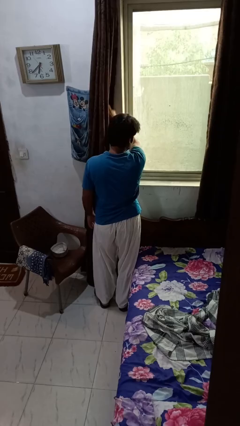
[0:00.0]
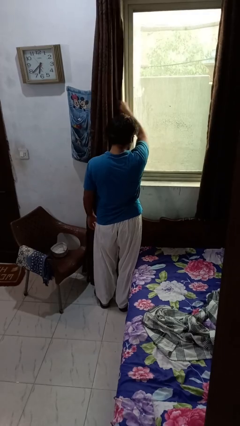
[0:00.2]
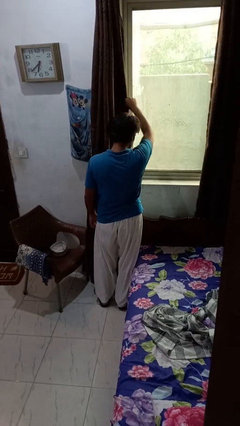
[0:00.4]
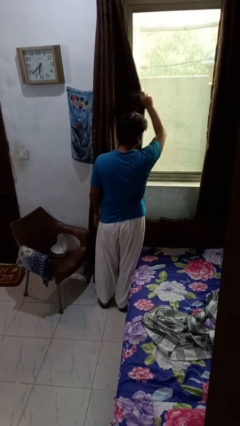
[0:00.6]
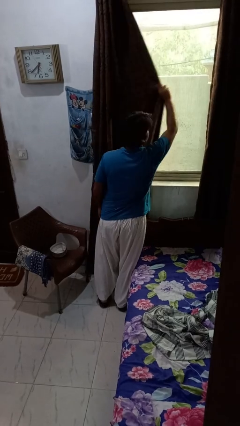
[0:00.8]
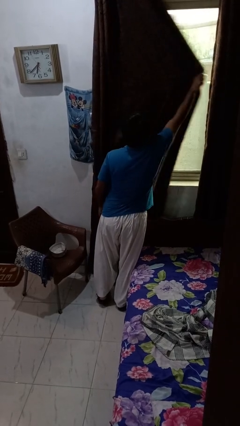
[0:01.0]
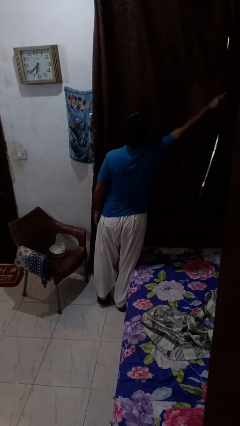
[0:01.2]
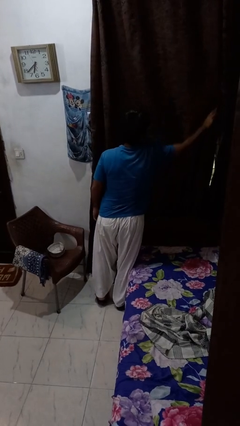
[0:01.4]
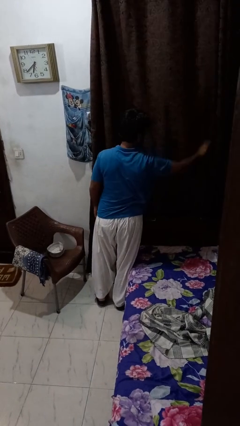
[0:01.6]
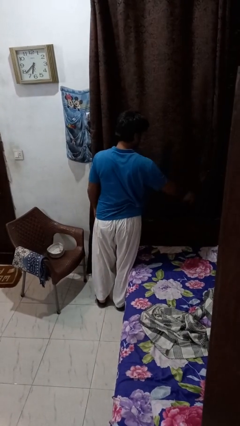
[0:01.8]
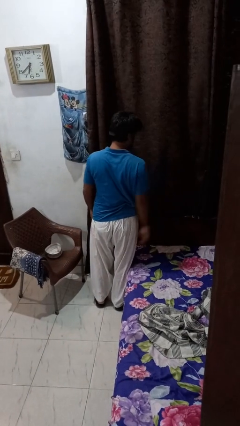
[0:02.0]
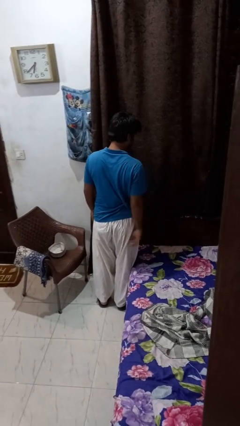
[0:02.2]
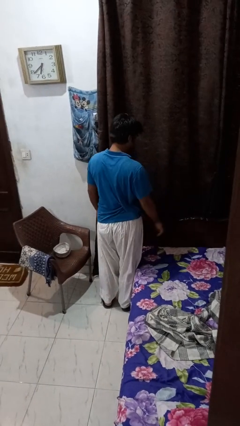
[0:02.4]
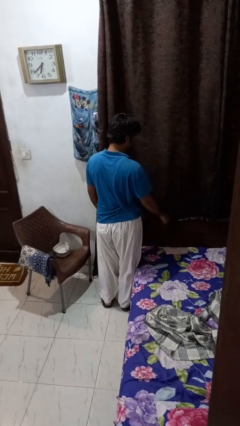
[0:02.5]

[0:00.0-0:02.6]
person closes curtains

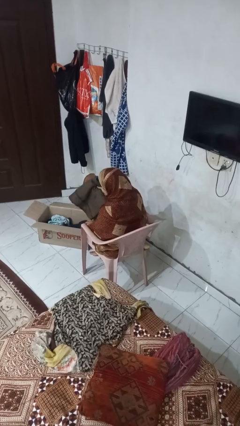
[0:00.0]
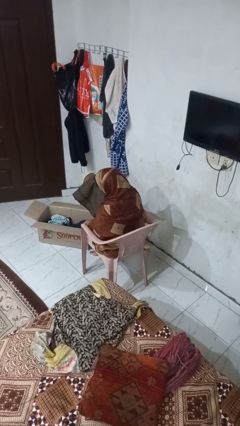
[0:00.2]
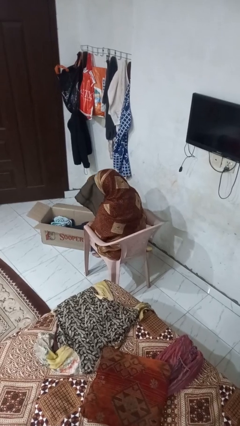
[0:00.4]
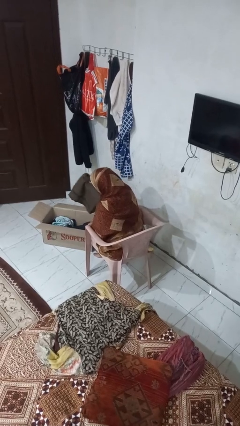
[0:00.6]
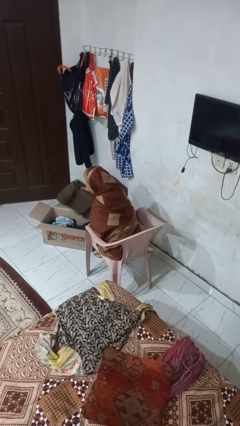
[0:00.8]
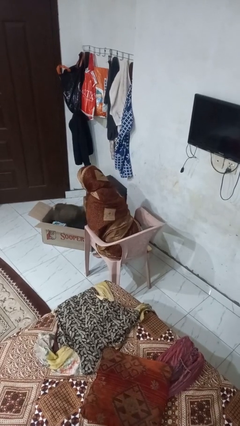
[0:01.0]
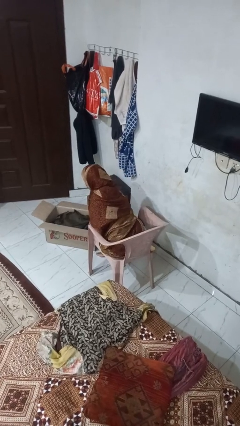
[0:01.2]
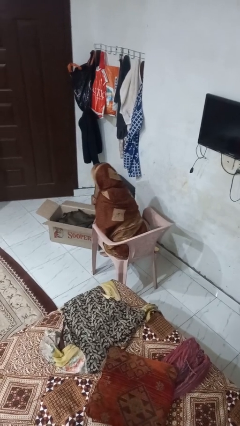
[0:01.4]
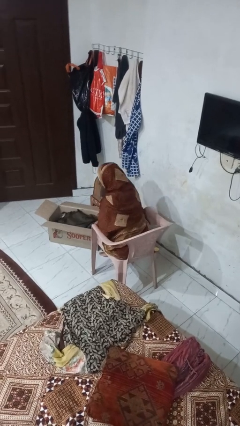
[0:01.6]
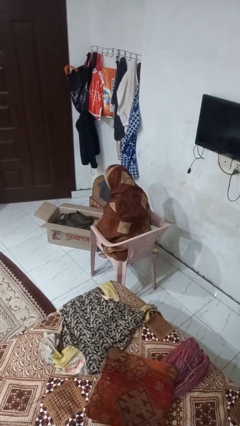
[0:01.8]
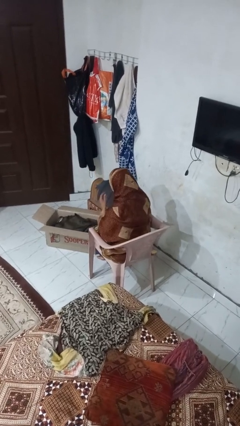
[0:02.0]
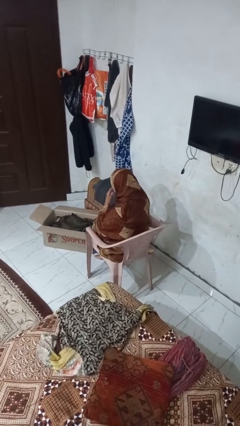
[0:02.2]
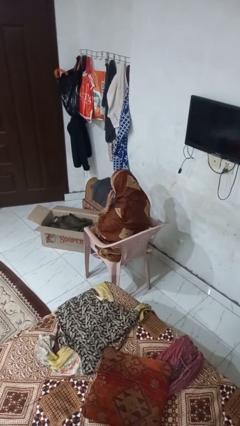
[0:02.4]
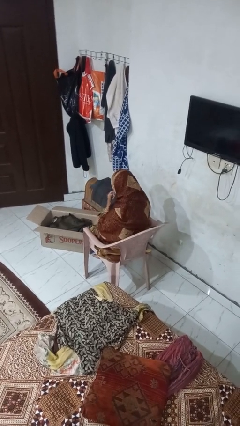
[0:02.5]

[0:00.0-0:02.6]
person puts object into box

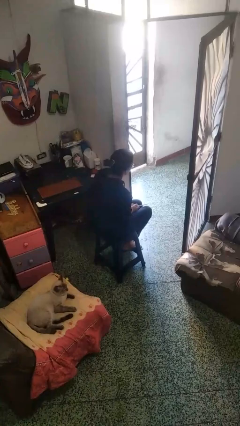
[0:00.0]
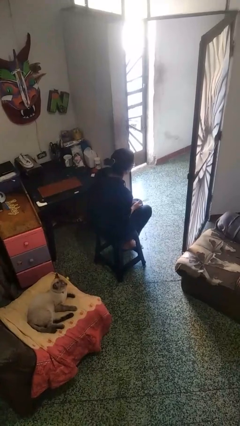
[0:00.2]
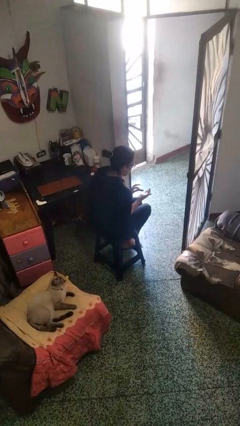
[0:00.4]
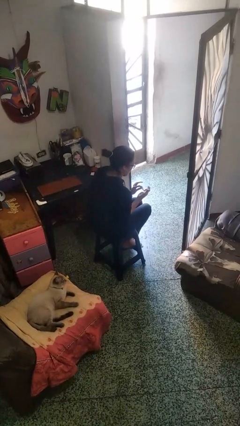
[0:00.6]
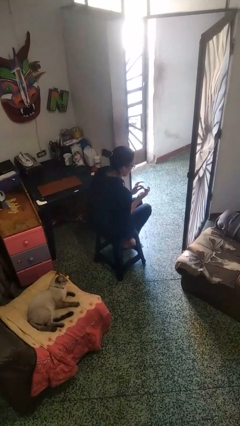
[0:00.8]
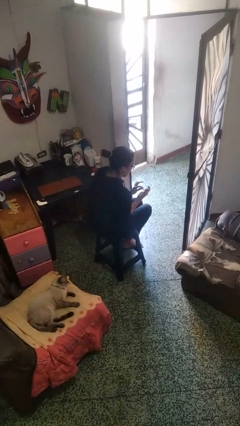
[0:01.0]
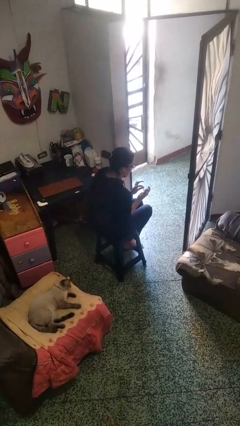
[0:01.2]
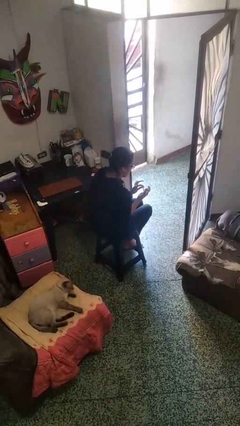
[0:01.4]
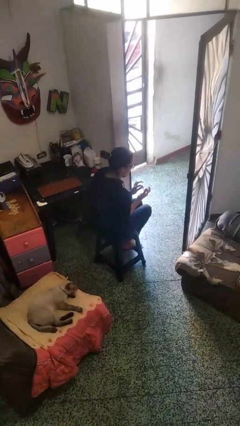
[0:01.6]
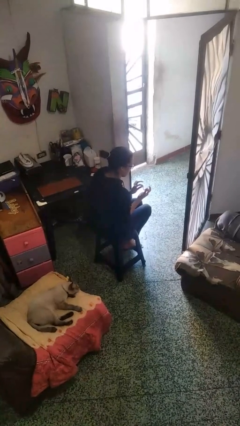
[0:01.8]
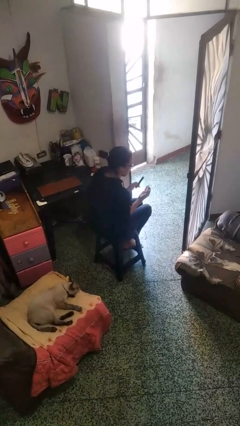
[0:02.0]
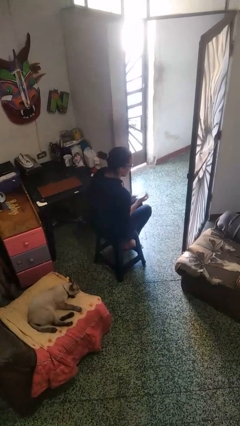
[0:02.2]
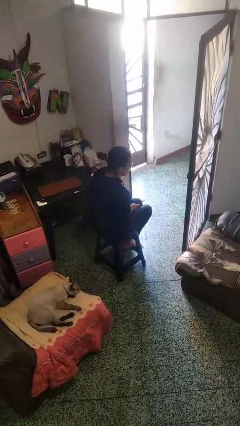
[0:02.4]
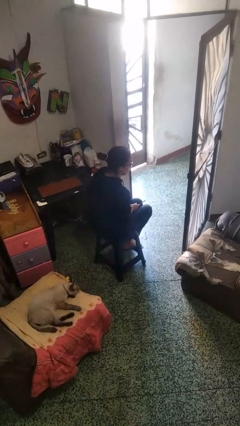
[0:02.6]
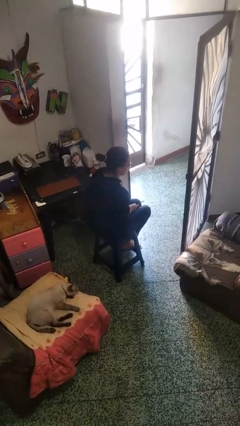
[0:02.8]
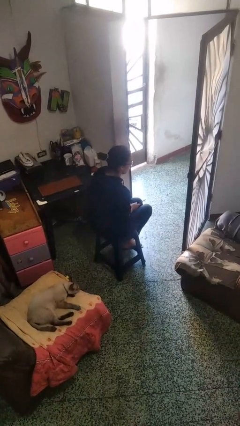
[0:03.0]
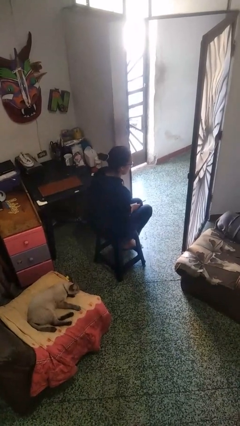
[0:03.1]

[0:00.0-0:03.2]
person files fingernails

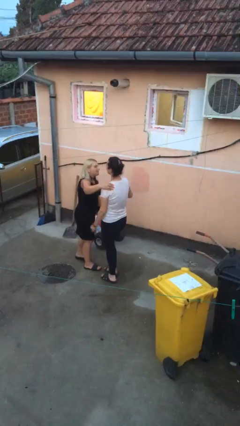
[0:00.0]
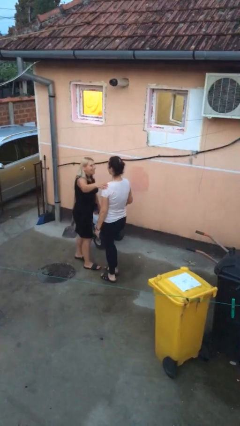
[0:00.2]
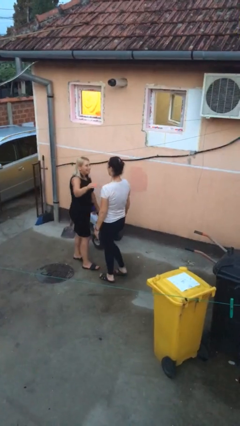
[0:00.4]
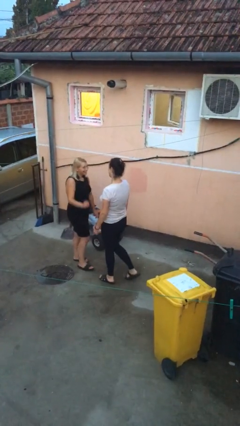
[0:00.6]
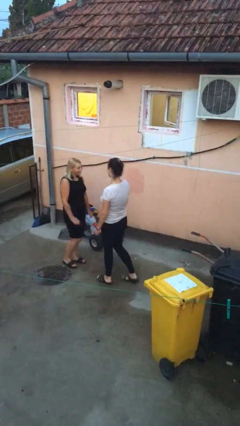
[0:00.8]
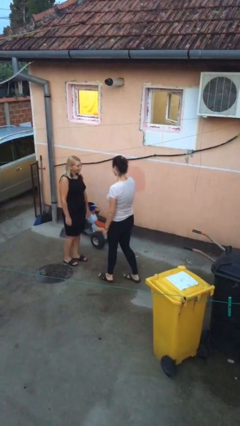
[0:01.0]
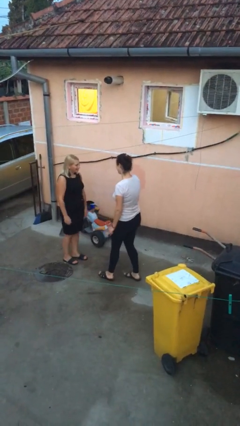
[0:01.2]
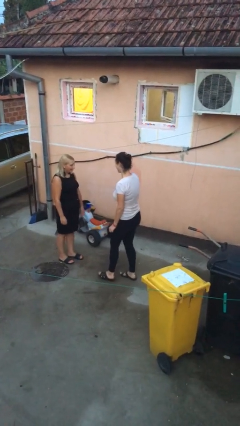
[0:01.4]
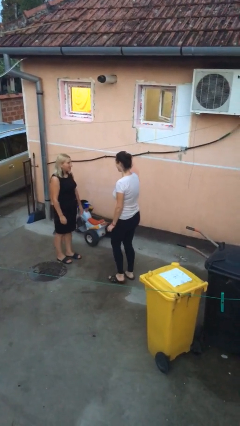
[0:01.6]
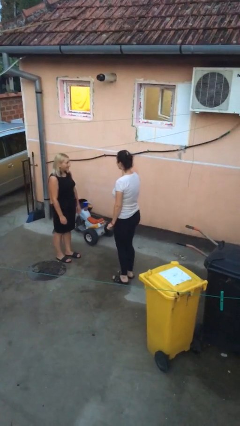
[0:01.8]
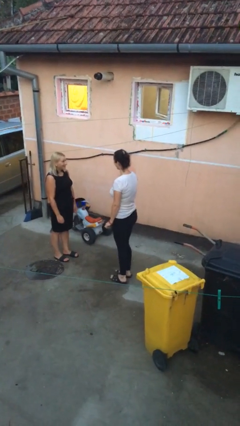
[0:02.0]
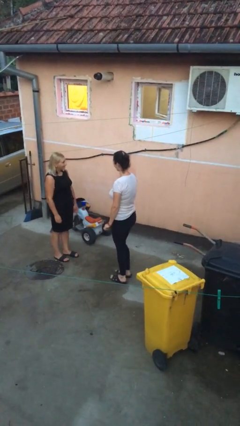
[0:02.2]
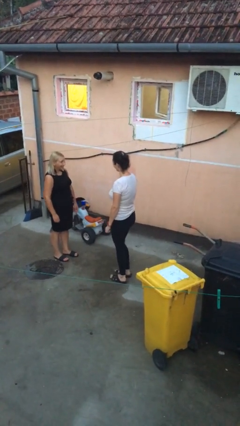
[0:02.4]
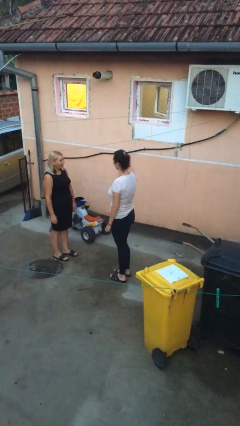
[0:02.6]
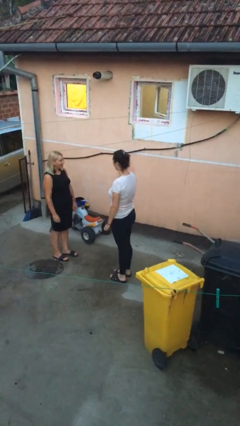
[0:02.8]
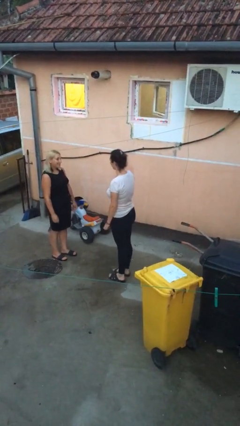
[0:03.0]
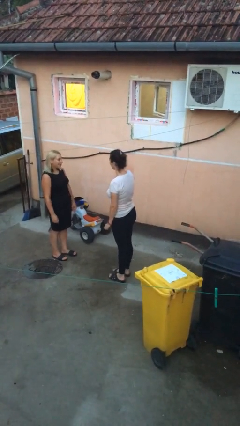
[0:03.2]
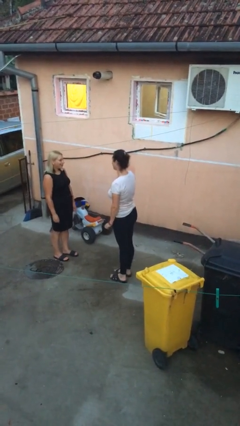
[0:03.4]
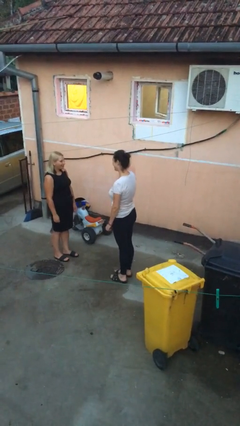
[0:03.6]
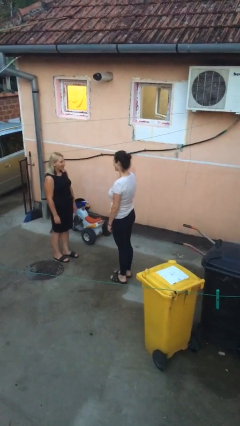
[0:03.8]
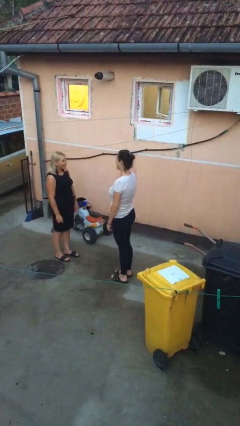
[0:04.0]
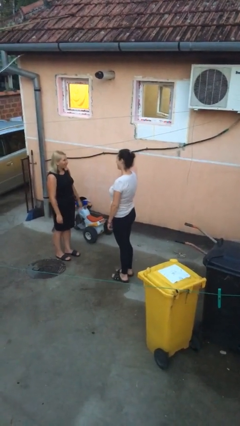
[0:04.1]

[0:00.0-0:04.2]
person talks to person

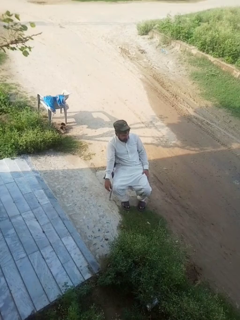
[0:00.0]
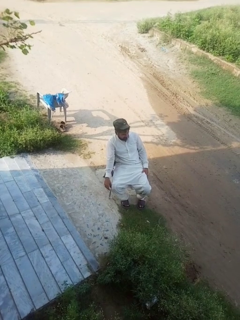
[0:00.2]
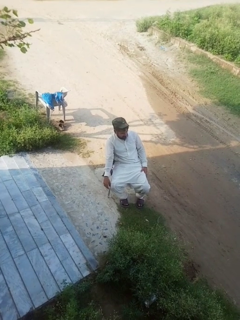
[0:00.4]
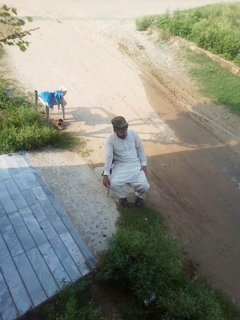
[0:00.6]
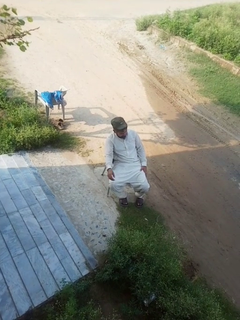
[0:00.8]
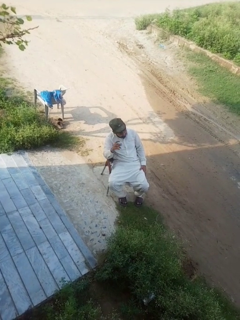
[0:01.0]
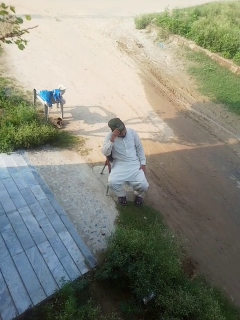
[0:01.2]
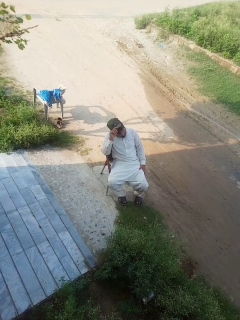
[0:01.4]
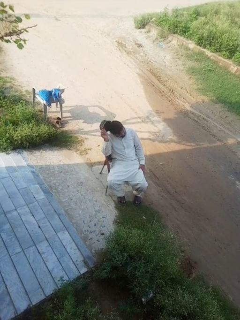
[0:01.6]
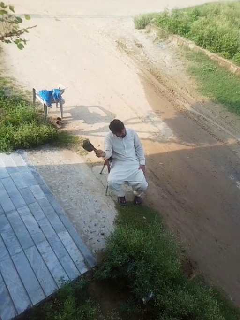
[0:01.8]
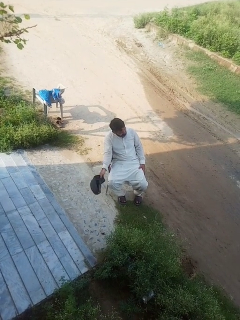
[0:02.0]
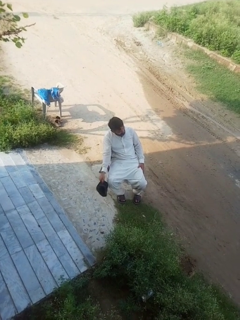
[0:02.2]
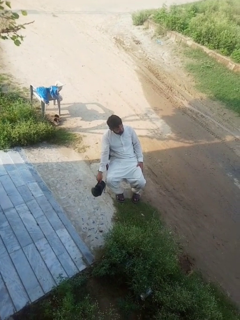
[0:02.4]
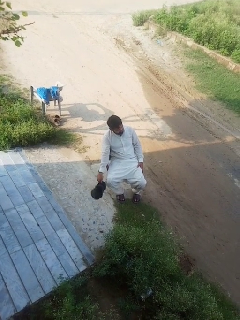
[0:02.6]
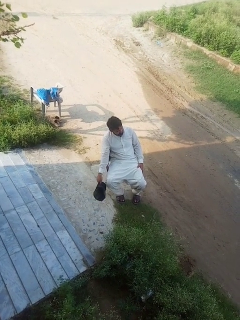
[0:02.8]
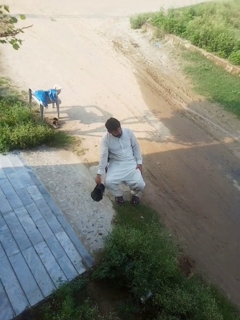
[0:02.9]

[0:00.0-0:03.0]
person takes off hat

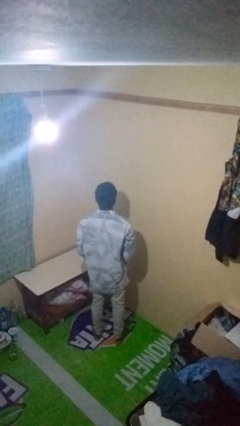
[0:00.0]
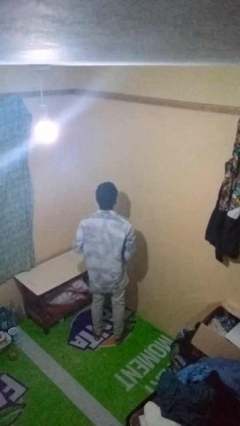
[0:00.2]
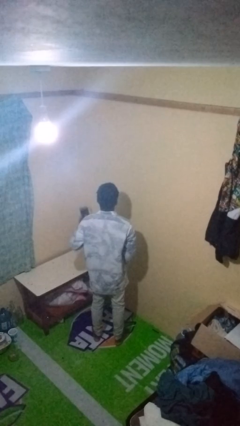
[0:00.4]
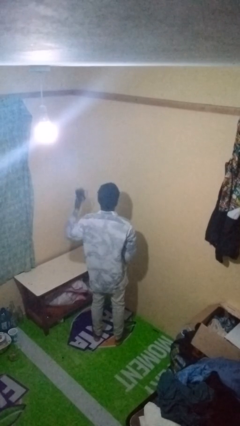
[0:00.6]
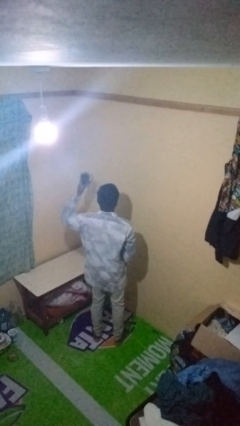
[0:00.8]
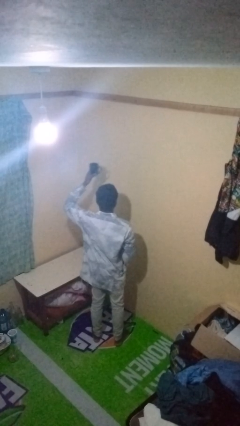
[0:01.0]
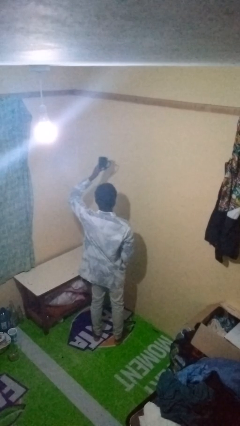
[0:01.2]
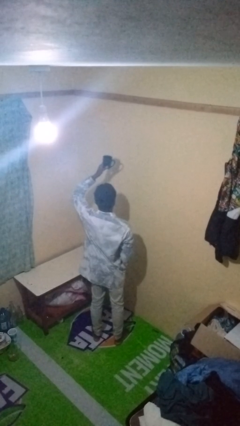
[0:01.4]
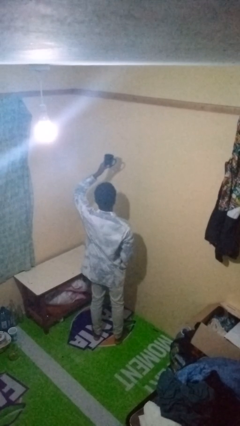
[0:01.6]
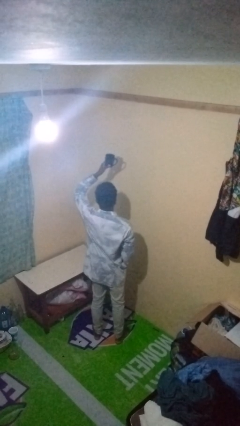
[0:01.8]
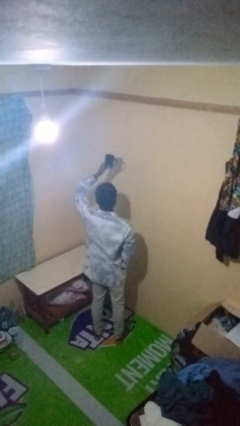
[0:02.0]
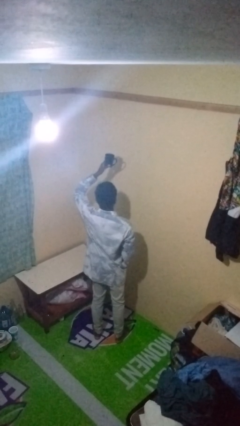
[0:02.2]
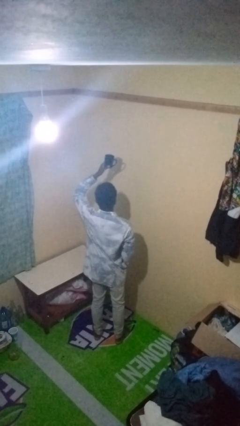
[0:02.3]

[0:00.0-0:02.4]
person holds object above head

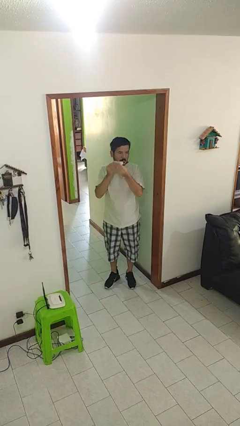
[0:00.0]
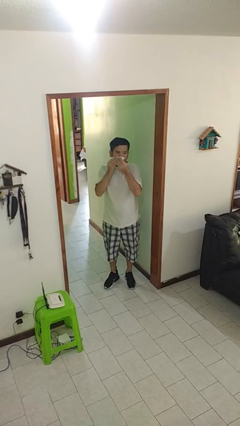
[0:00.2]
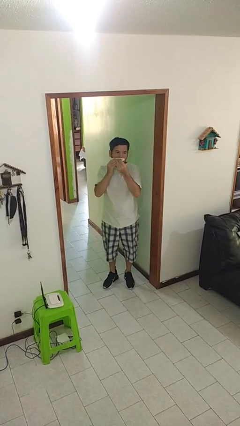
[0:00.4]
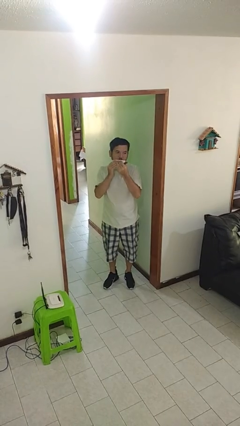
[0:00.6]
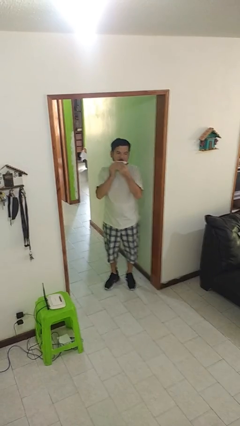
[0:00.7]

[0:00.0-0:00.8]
person wipes mouth with napkin
